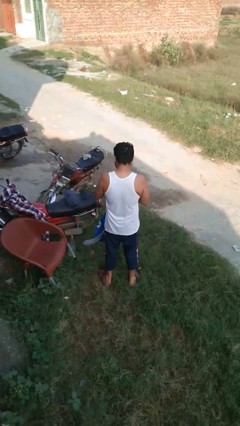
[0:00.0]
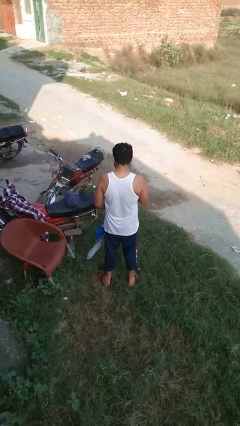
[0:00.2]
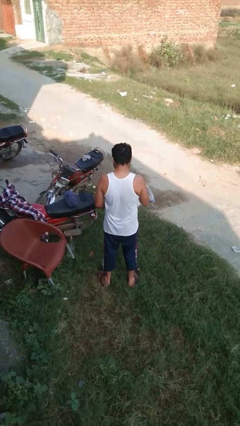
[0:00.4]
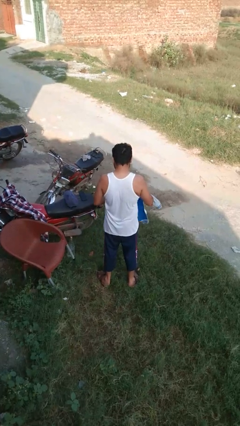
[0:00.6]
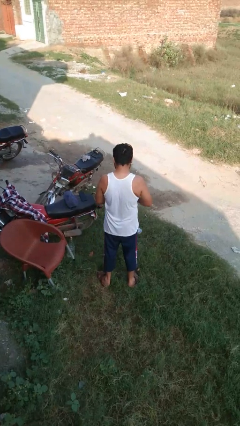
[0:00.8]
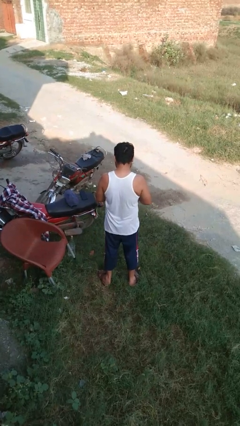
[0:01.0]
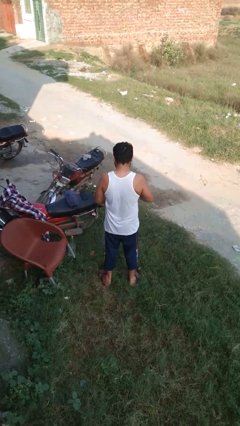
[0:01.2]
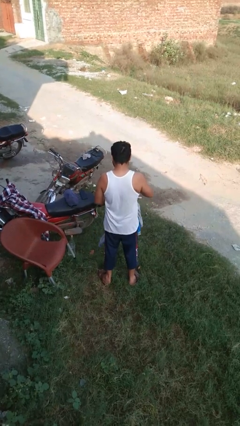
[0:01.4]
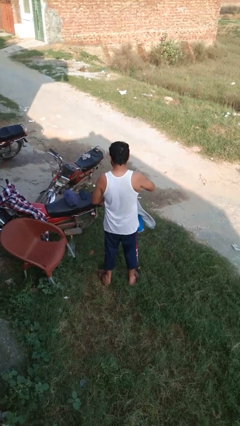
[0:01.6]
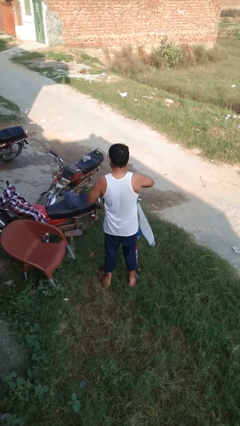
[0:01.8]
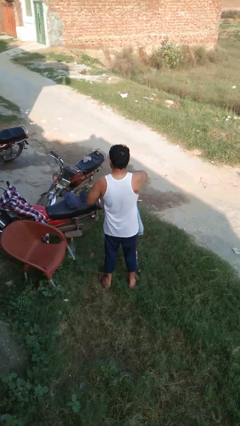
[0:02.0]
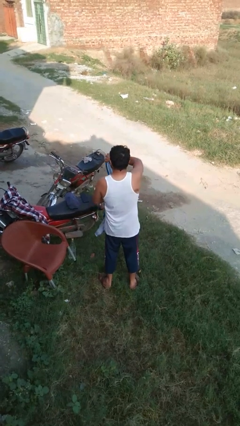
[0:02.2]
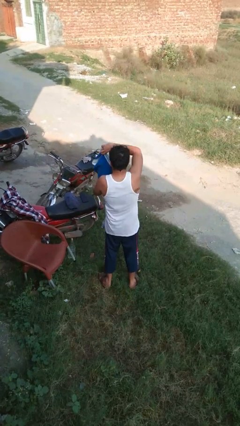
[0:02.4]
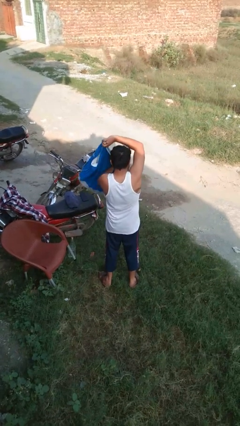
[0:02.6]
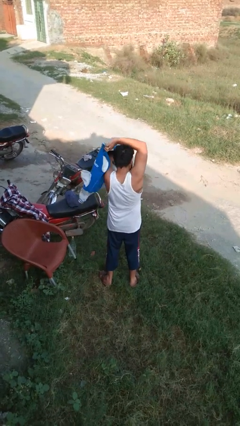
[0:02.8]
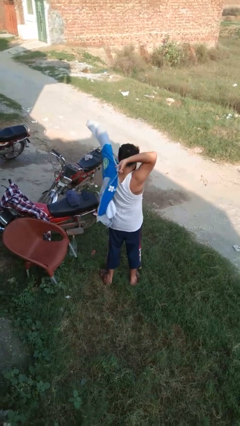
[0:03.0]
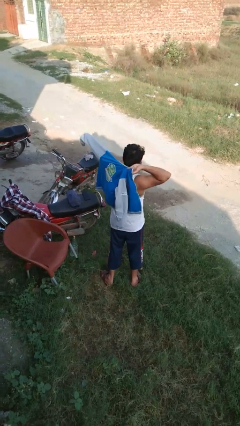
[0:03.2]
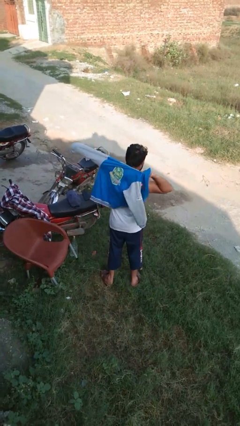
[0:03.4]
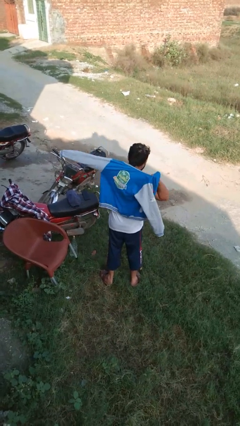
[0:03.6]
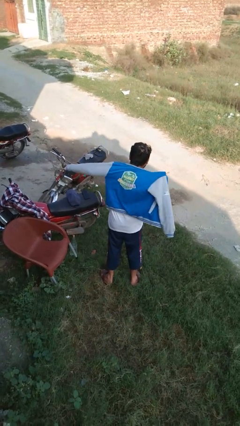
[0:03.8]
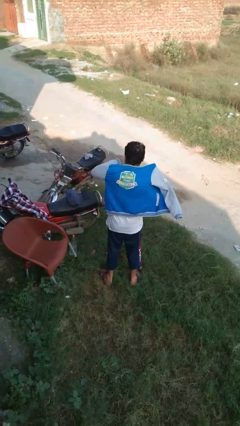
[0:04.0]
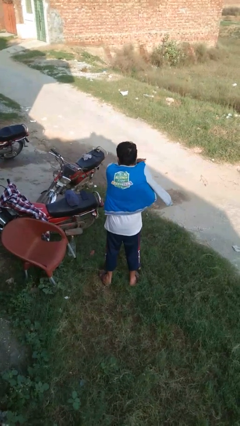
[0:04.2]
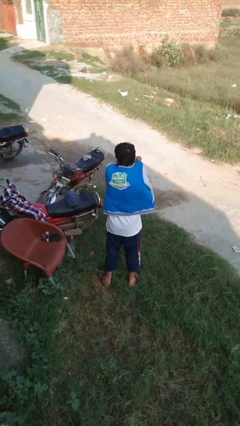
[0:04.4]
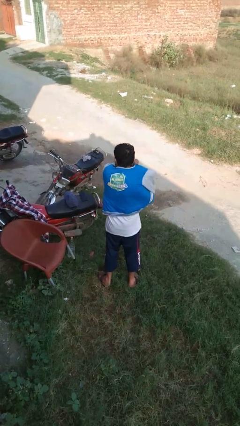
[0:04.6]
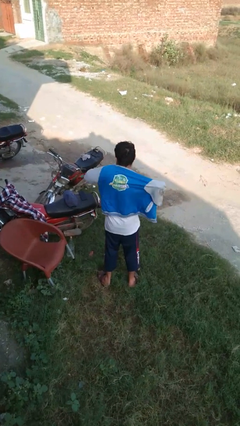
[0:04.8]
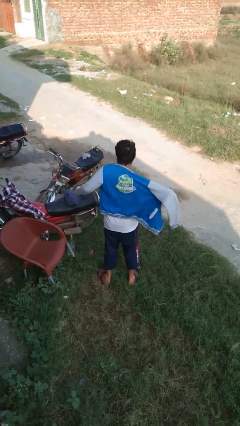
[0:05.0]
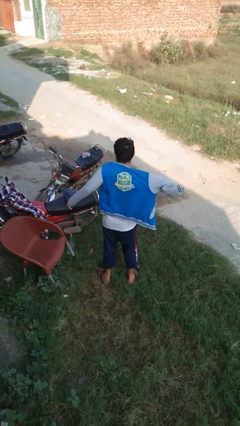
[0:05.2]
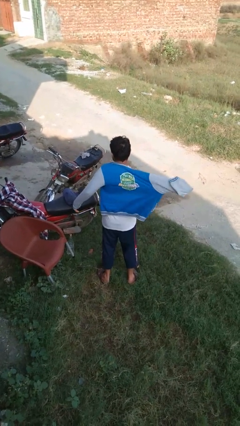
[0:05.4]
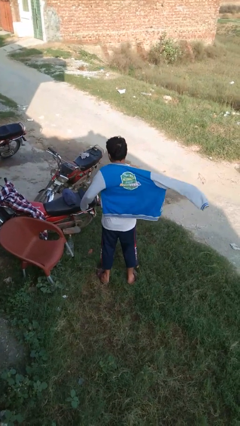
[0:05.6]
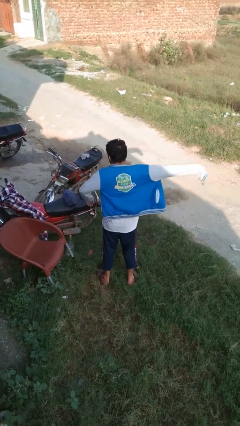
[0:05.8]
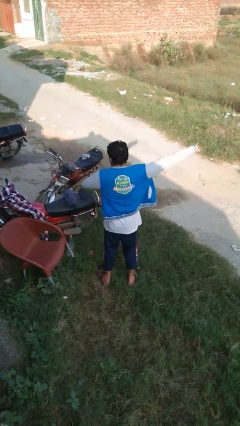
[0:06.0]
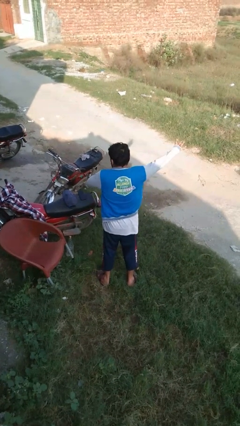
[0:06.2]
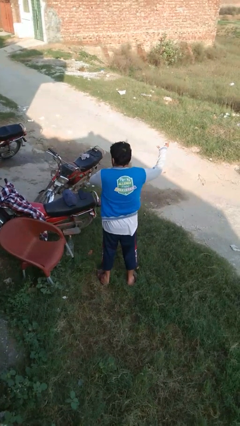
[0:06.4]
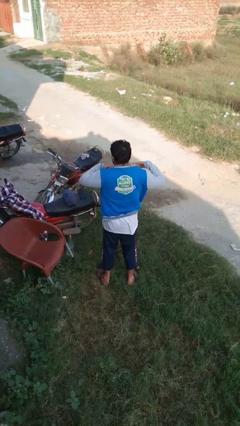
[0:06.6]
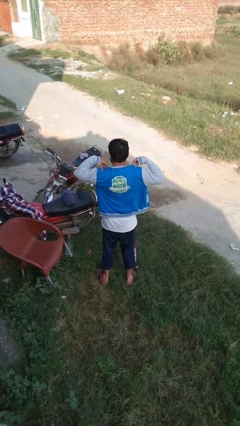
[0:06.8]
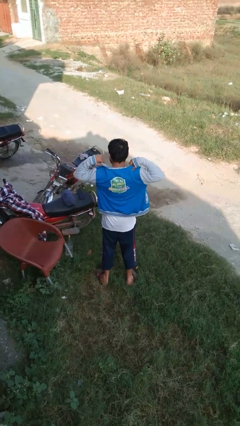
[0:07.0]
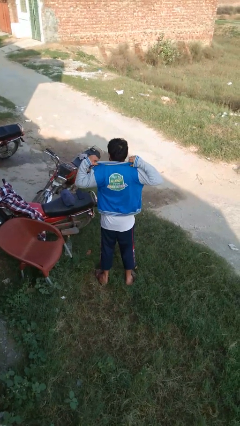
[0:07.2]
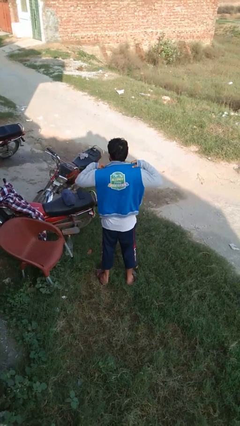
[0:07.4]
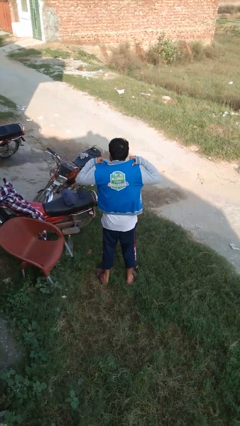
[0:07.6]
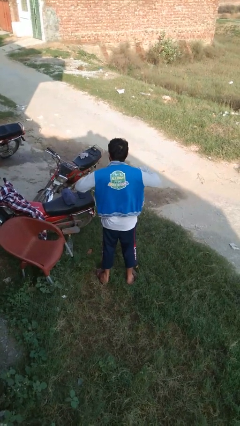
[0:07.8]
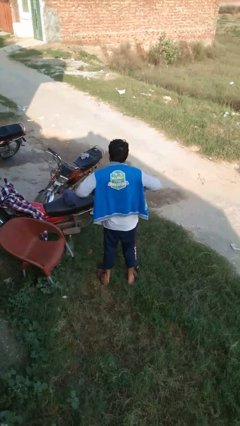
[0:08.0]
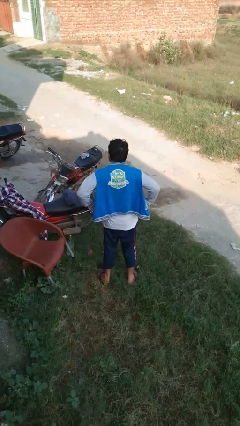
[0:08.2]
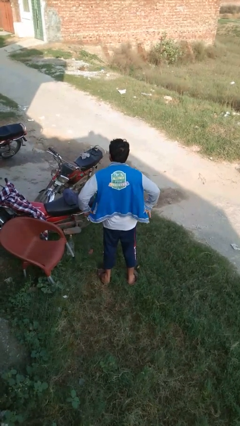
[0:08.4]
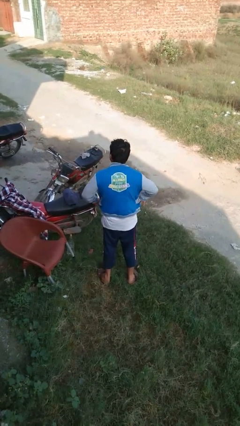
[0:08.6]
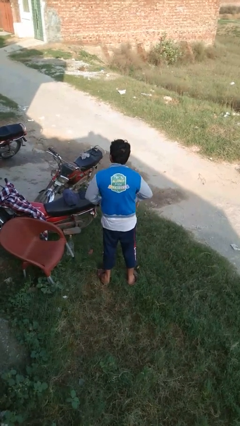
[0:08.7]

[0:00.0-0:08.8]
person puts on jacket

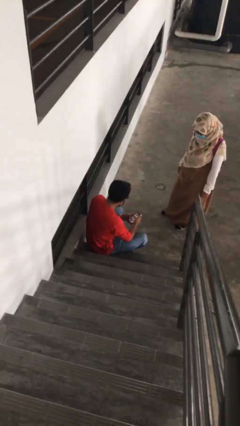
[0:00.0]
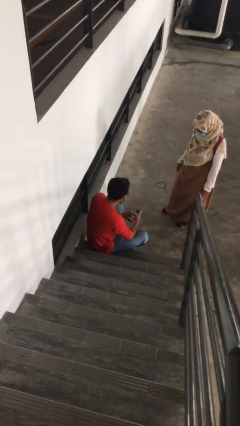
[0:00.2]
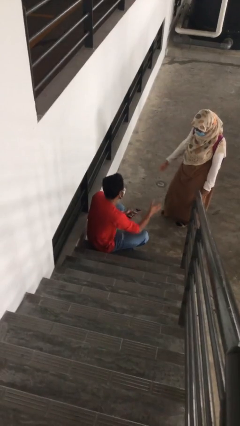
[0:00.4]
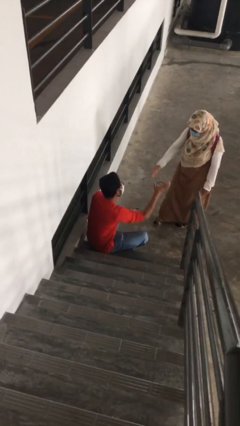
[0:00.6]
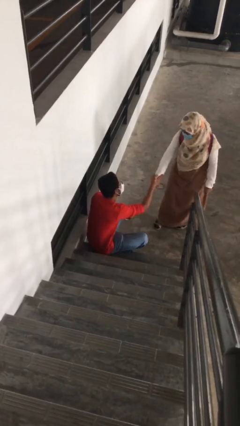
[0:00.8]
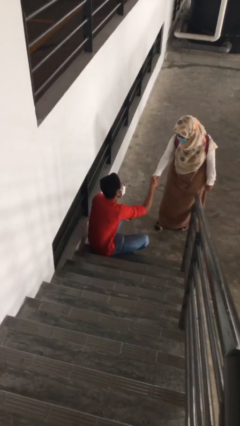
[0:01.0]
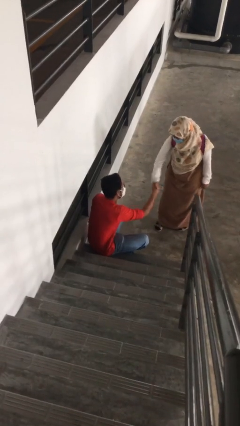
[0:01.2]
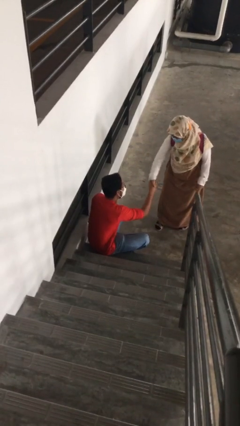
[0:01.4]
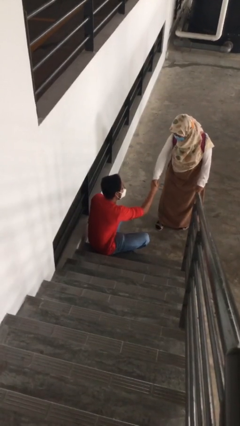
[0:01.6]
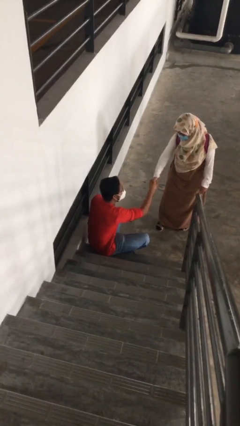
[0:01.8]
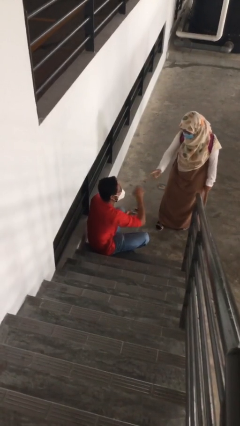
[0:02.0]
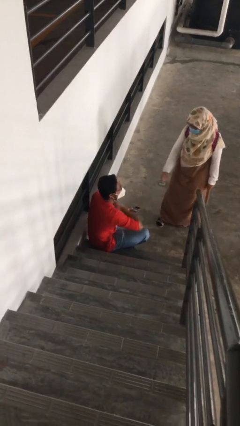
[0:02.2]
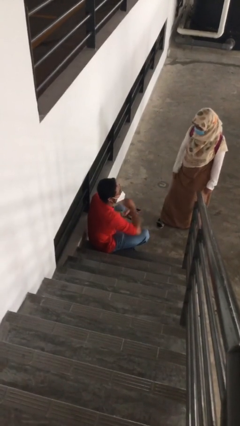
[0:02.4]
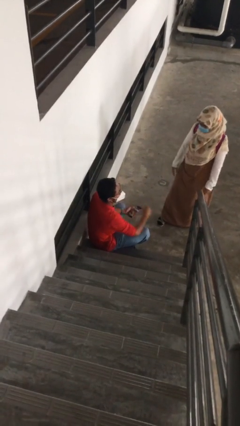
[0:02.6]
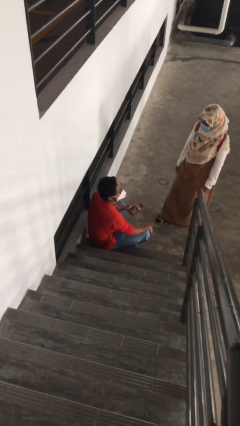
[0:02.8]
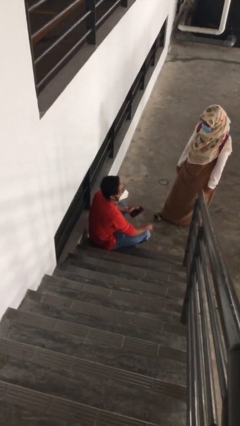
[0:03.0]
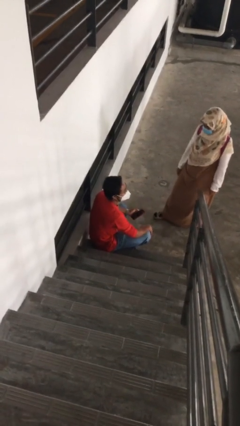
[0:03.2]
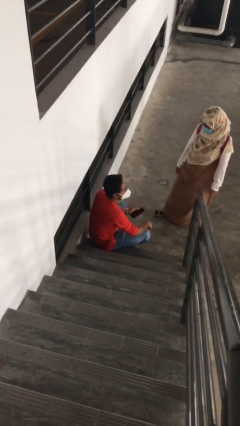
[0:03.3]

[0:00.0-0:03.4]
person shakes hand

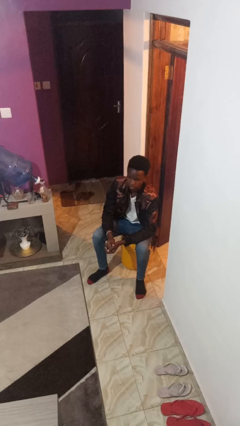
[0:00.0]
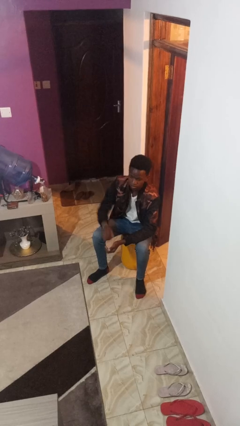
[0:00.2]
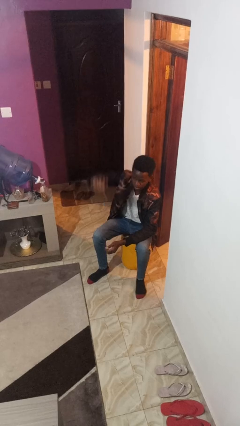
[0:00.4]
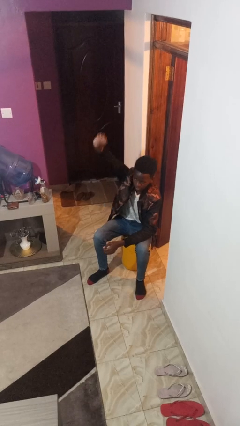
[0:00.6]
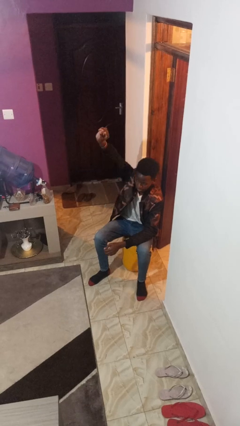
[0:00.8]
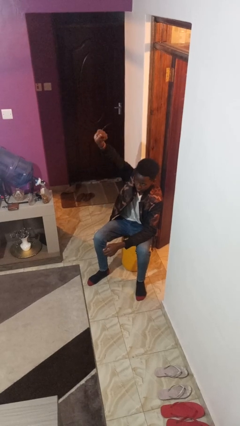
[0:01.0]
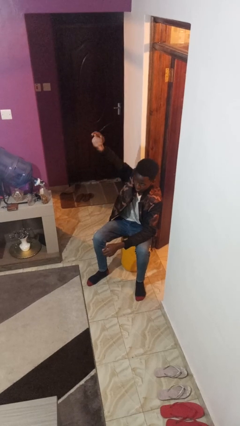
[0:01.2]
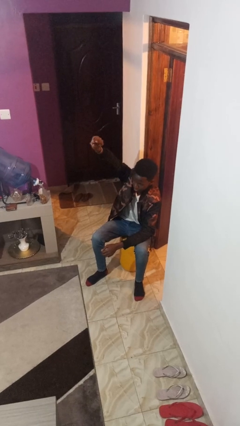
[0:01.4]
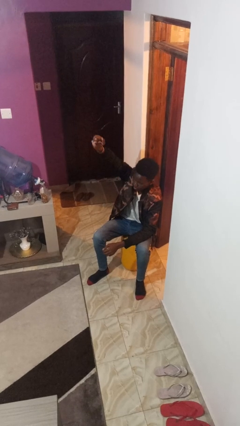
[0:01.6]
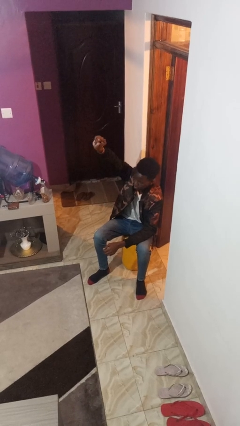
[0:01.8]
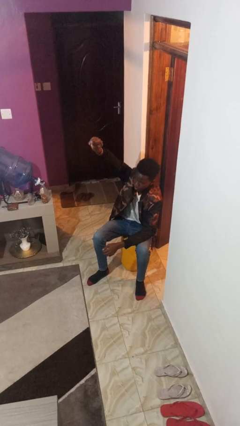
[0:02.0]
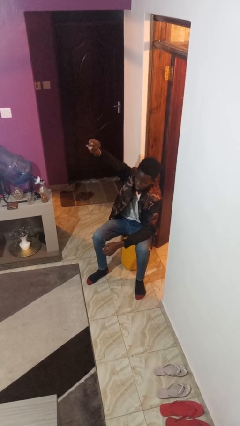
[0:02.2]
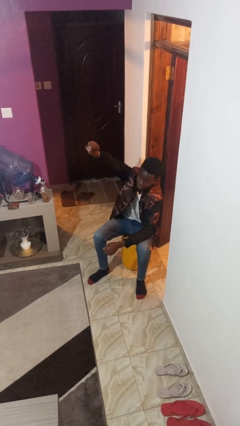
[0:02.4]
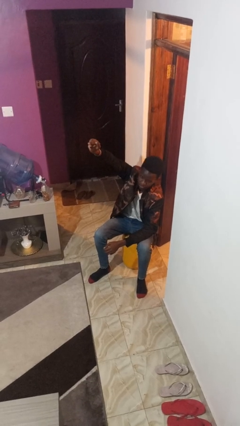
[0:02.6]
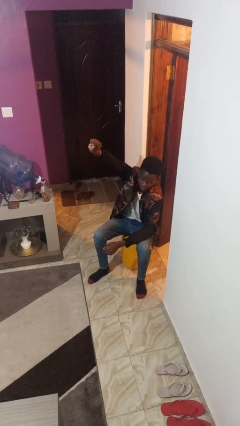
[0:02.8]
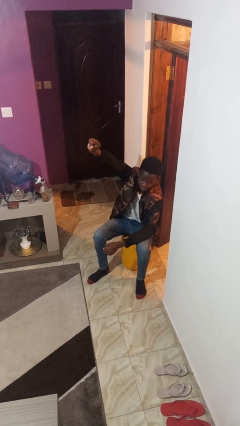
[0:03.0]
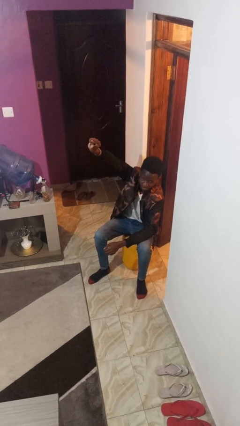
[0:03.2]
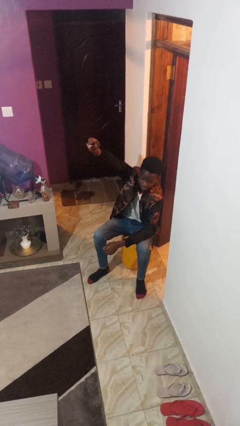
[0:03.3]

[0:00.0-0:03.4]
person gestures raise hand

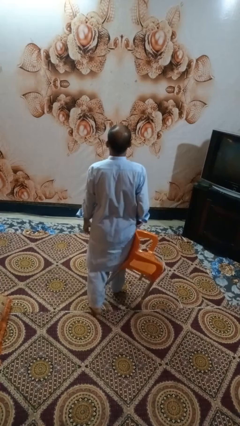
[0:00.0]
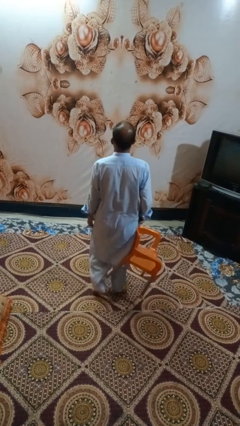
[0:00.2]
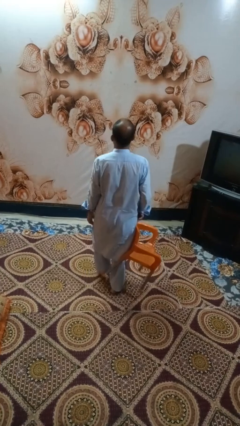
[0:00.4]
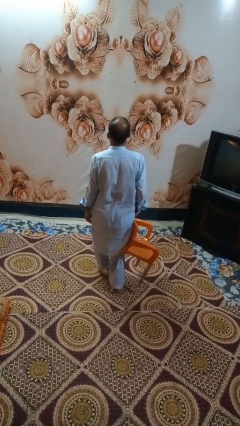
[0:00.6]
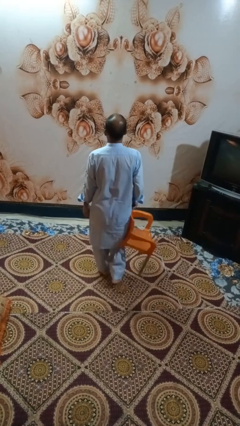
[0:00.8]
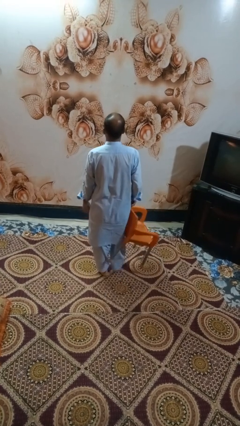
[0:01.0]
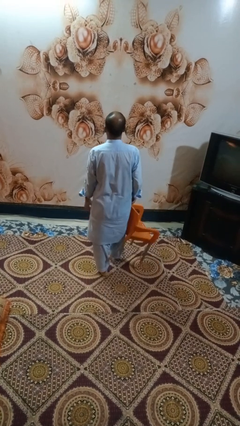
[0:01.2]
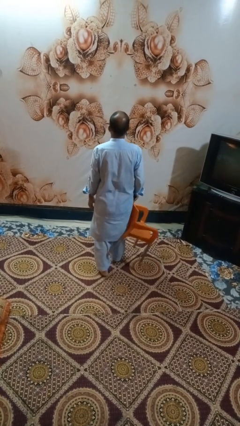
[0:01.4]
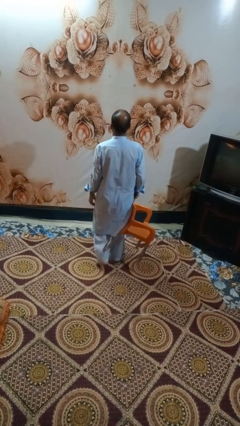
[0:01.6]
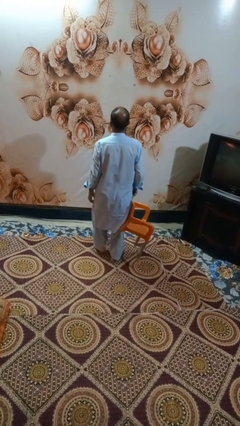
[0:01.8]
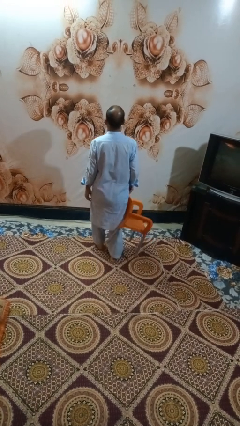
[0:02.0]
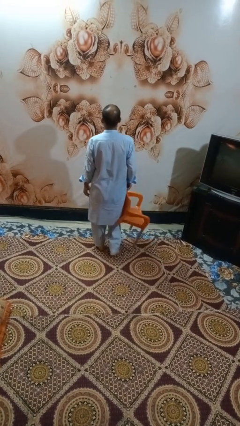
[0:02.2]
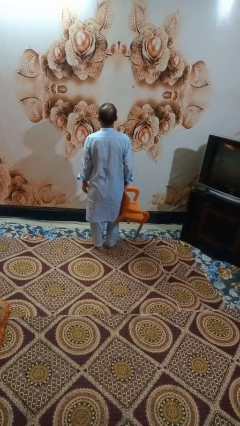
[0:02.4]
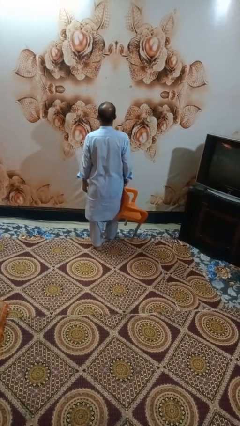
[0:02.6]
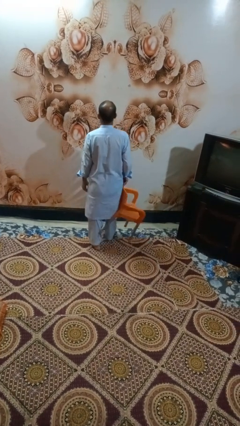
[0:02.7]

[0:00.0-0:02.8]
person carries furniture
